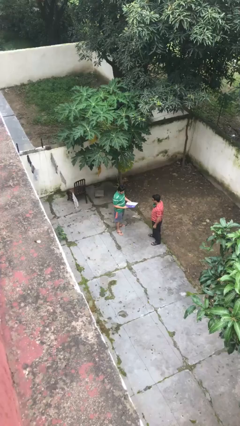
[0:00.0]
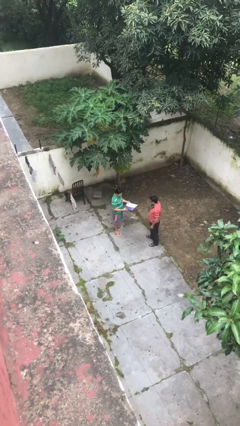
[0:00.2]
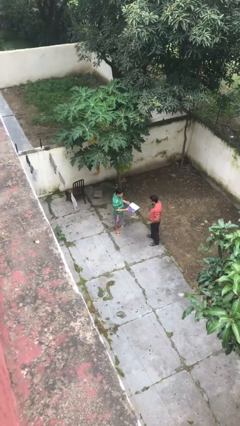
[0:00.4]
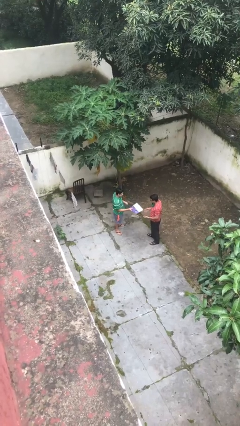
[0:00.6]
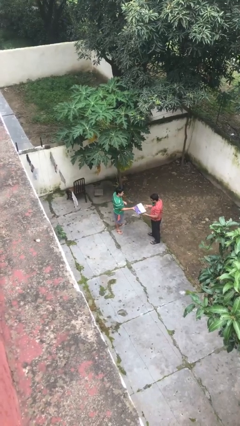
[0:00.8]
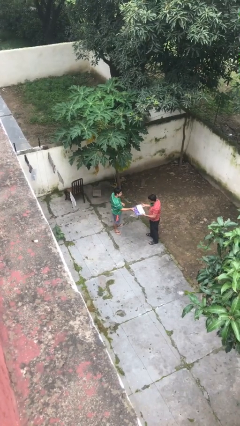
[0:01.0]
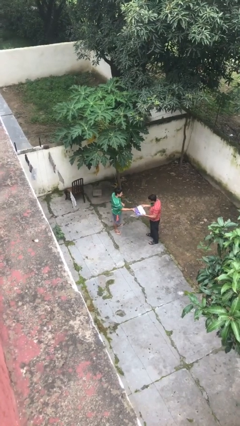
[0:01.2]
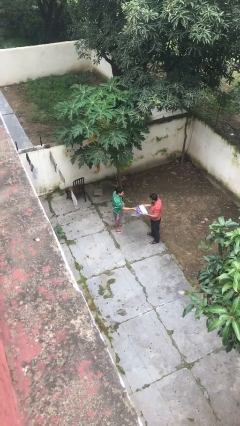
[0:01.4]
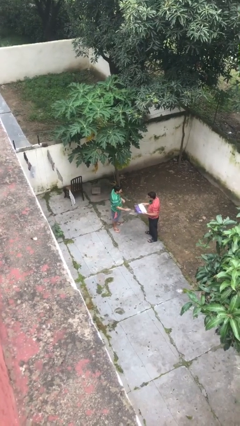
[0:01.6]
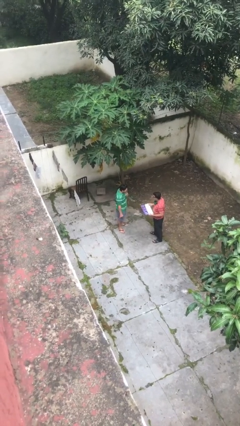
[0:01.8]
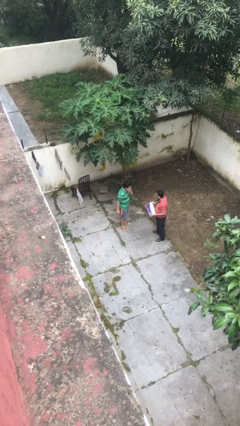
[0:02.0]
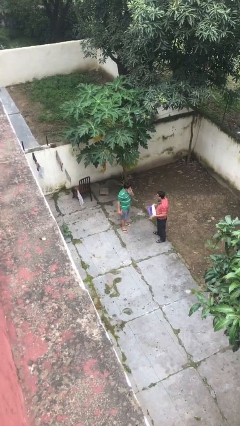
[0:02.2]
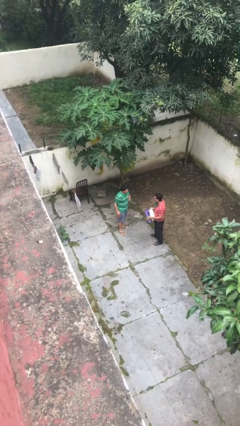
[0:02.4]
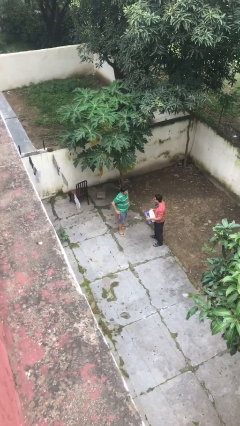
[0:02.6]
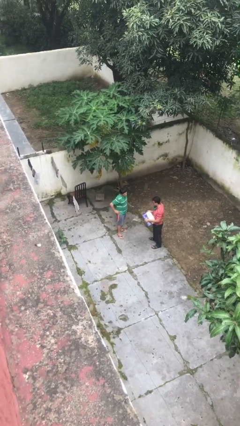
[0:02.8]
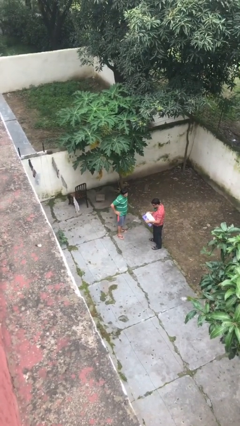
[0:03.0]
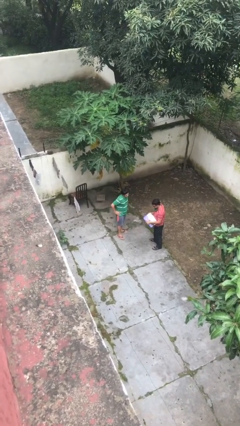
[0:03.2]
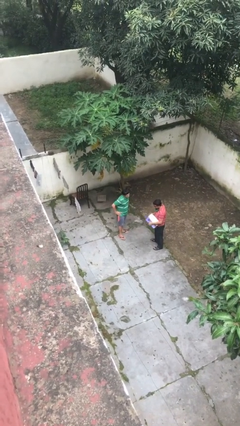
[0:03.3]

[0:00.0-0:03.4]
person transfers object to person

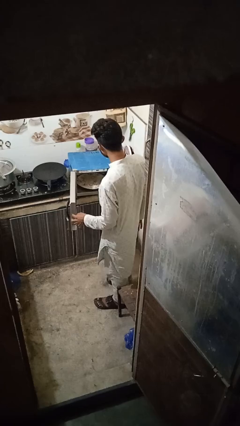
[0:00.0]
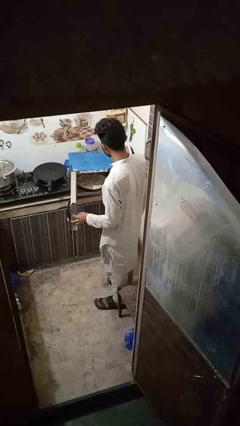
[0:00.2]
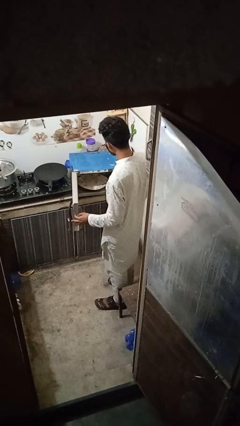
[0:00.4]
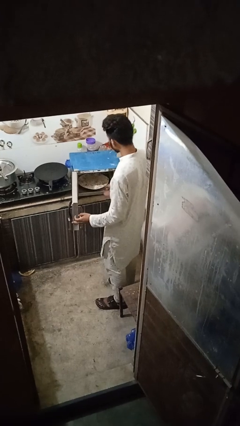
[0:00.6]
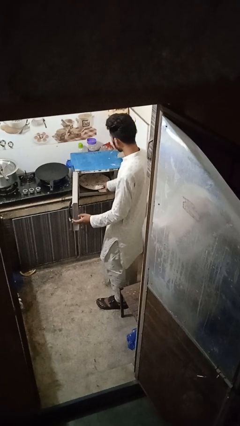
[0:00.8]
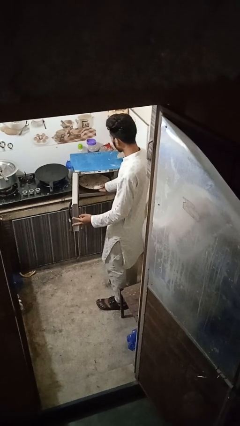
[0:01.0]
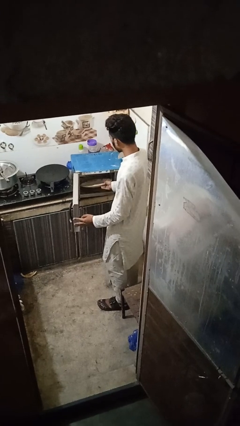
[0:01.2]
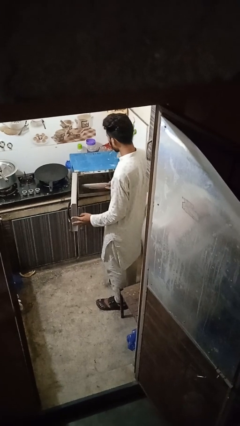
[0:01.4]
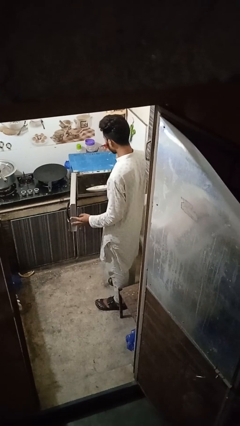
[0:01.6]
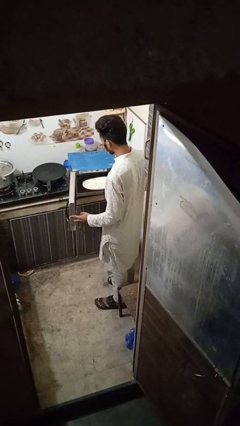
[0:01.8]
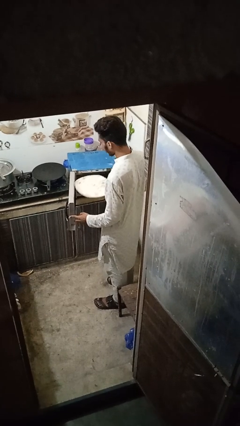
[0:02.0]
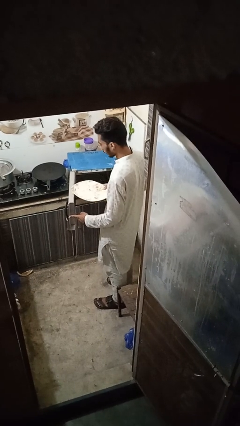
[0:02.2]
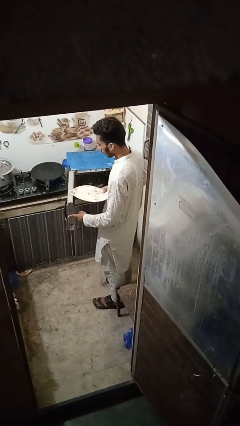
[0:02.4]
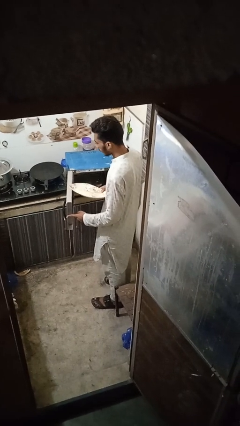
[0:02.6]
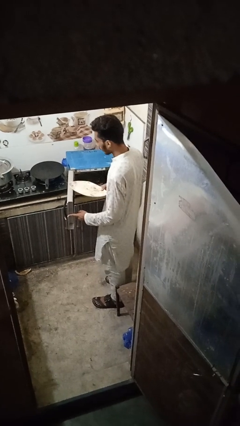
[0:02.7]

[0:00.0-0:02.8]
person takes object from oven

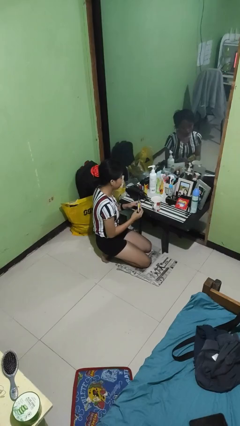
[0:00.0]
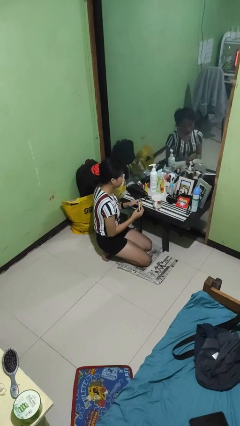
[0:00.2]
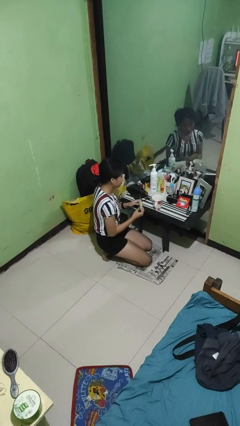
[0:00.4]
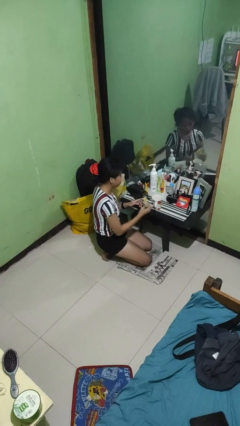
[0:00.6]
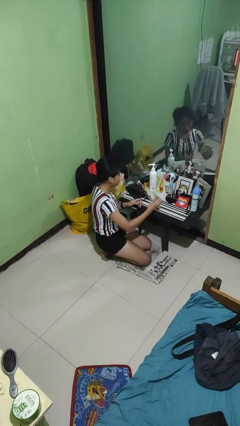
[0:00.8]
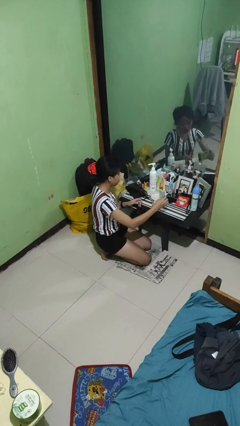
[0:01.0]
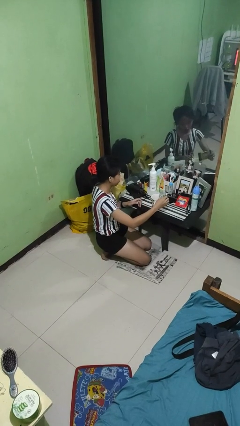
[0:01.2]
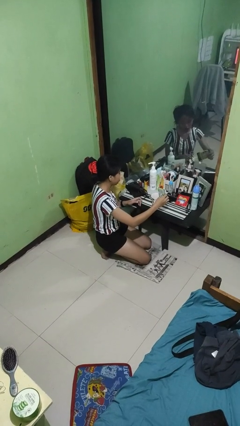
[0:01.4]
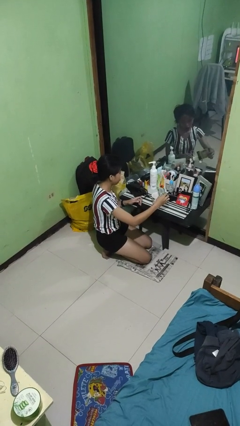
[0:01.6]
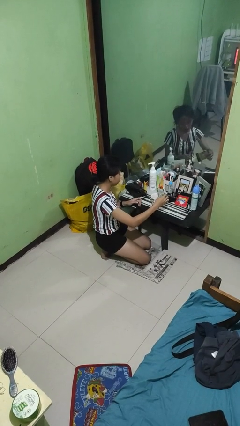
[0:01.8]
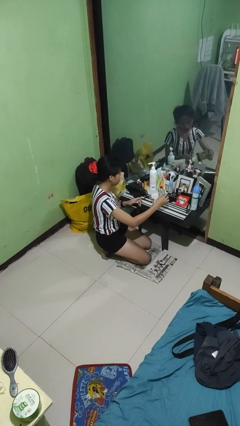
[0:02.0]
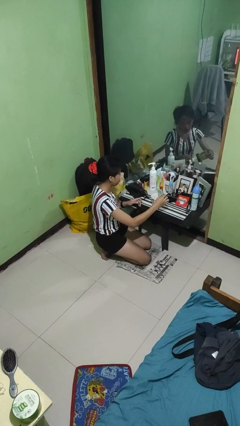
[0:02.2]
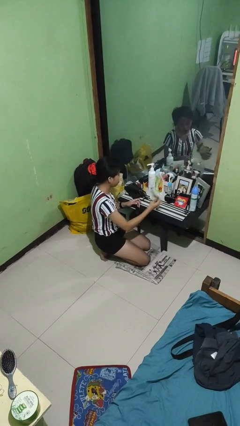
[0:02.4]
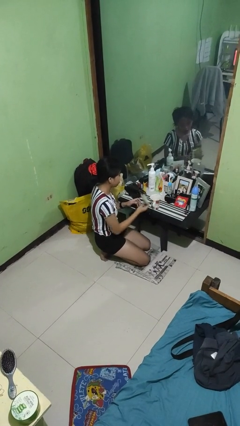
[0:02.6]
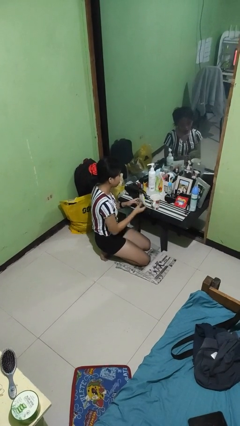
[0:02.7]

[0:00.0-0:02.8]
person pours coffee into mug

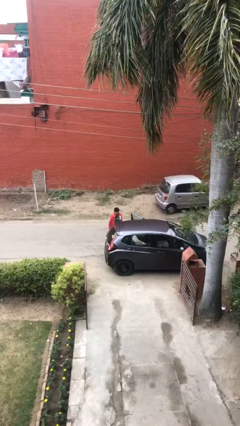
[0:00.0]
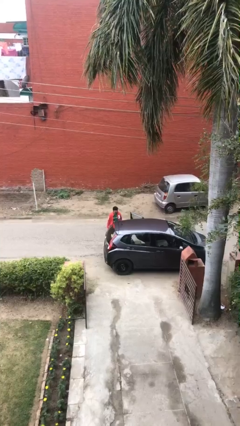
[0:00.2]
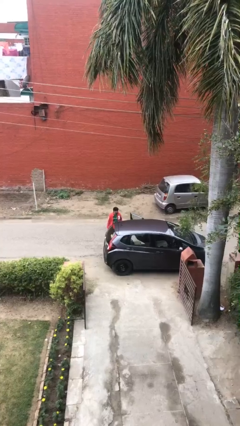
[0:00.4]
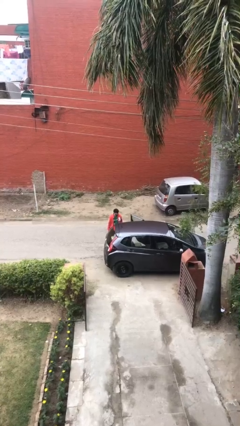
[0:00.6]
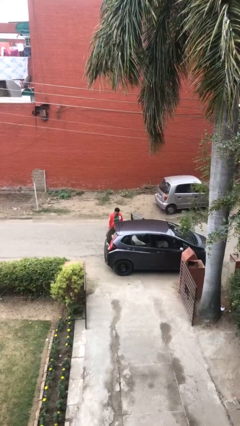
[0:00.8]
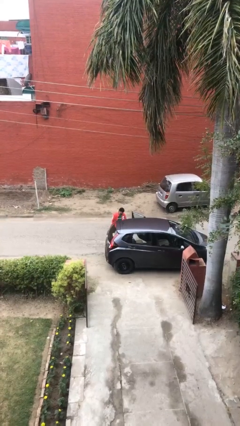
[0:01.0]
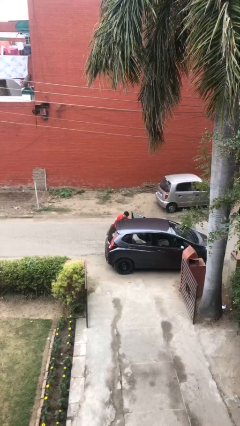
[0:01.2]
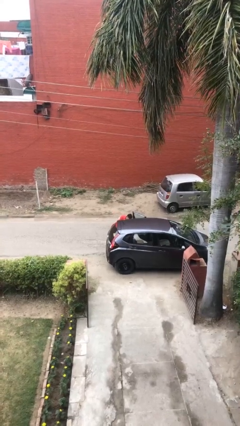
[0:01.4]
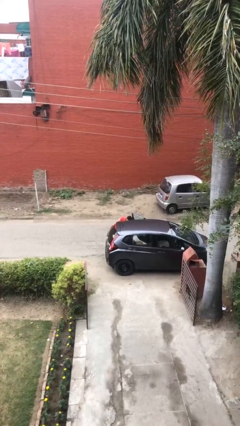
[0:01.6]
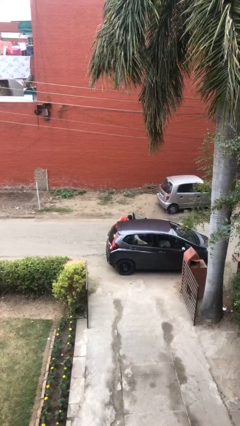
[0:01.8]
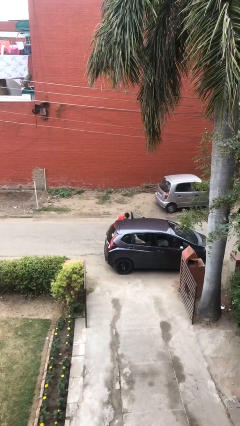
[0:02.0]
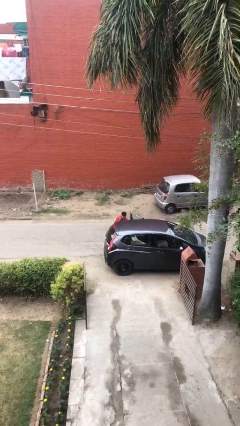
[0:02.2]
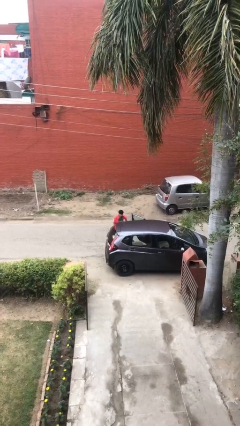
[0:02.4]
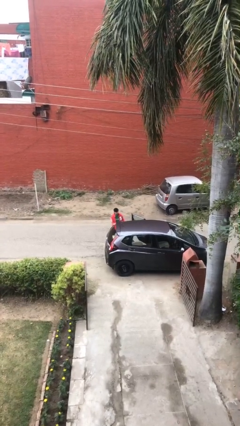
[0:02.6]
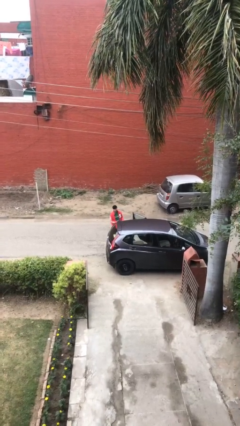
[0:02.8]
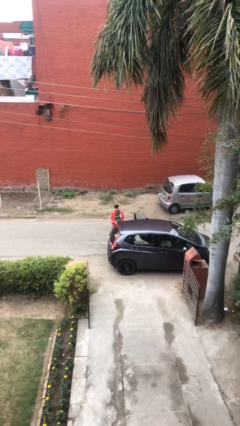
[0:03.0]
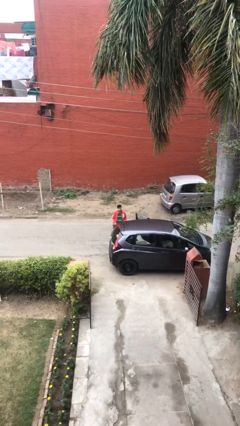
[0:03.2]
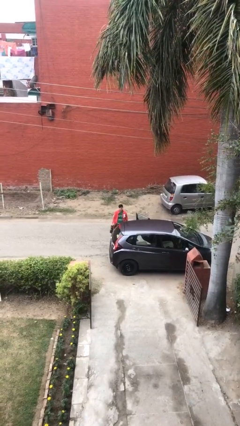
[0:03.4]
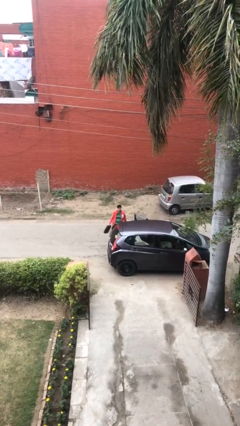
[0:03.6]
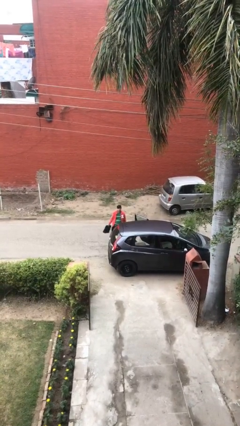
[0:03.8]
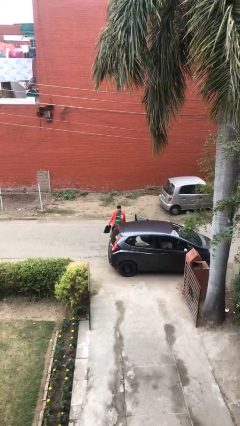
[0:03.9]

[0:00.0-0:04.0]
person unloads car

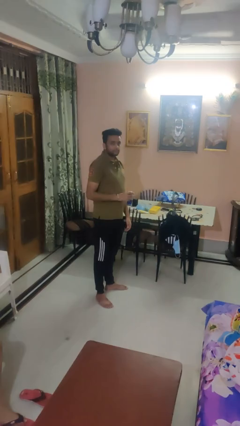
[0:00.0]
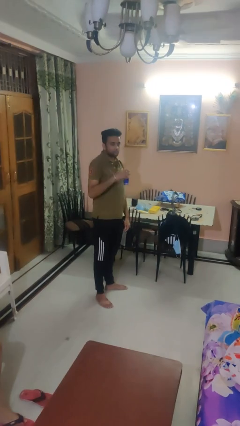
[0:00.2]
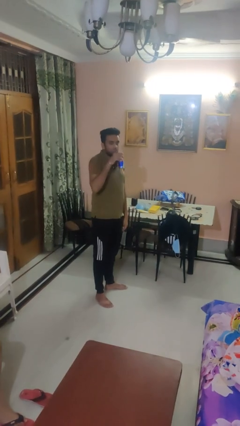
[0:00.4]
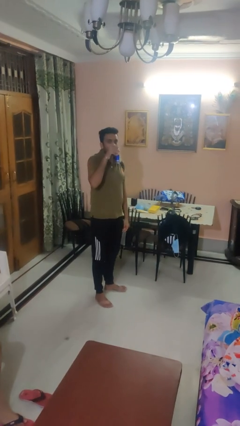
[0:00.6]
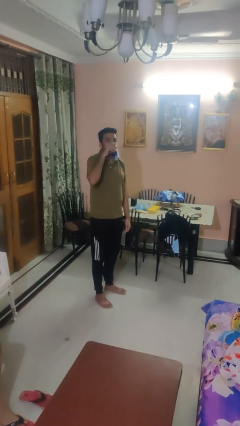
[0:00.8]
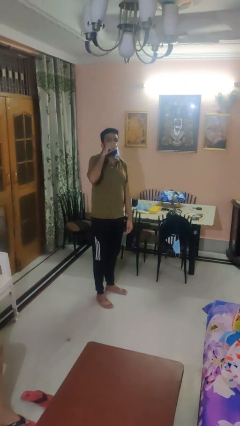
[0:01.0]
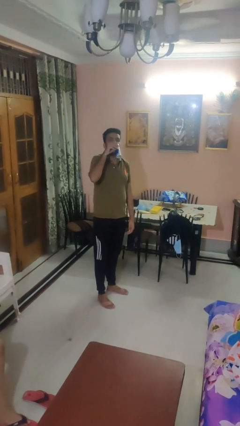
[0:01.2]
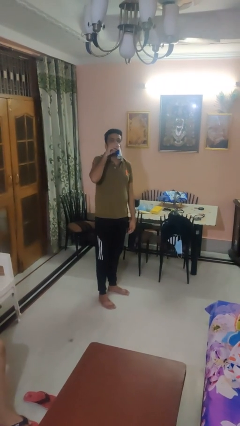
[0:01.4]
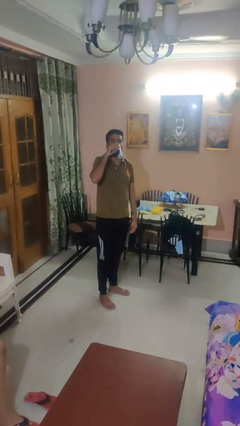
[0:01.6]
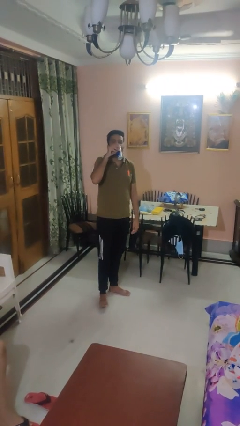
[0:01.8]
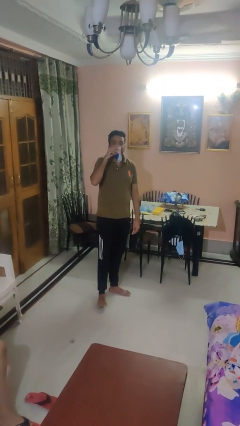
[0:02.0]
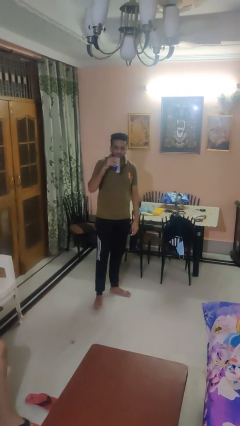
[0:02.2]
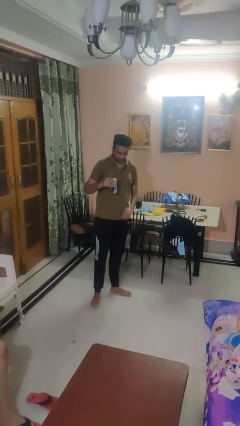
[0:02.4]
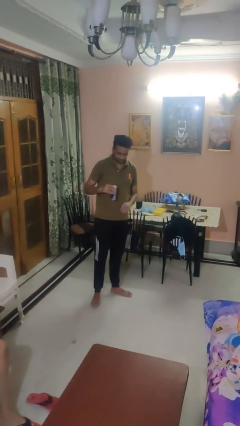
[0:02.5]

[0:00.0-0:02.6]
person drinks from beverage can

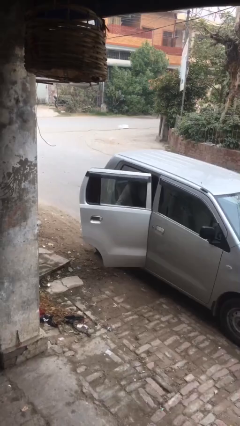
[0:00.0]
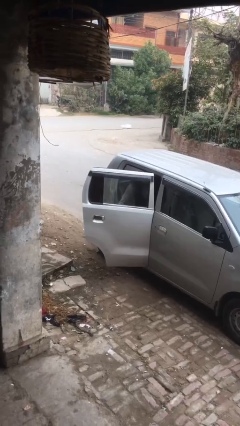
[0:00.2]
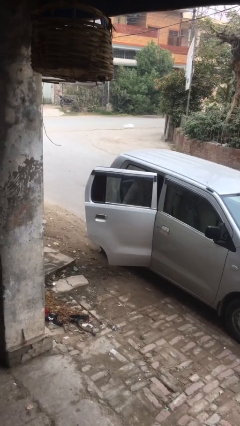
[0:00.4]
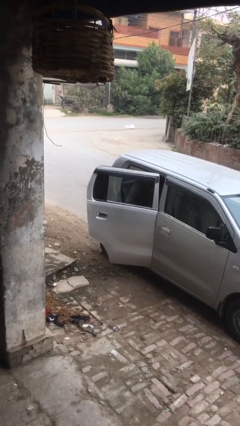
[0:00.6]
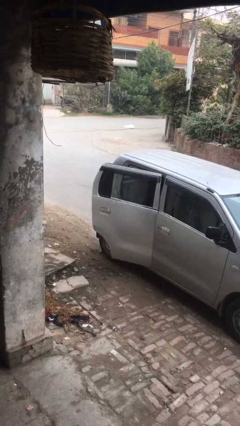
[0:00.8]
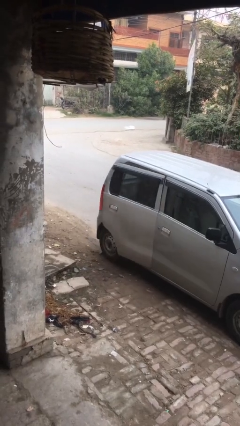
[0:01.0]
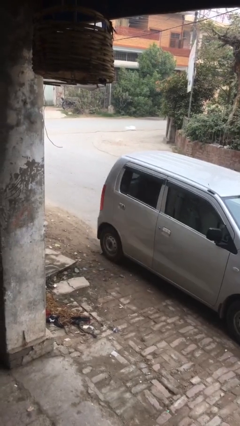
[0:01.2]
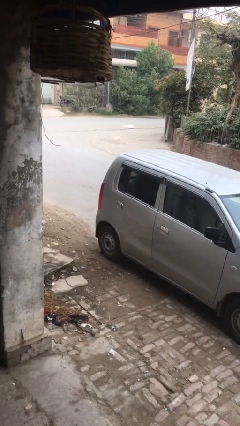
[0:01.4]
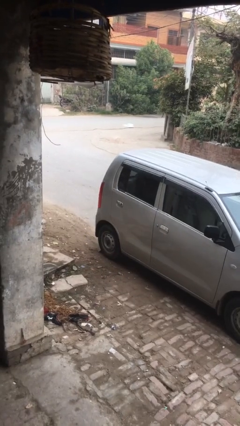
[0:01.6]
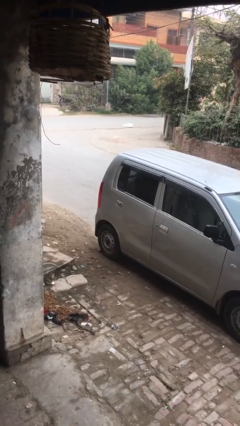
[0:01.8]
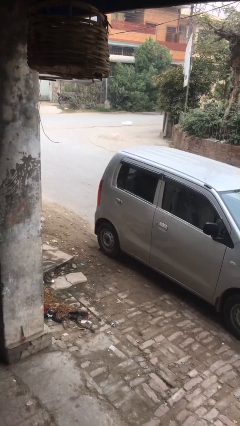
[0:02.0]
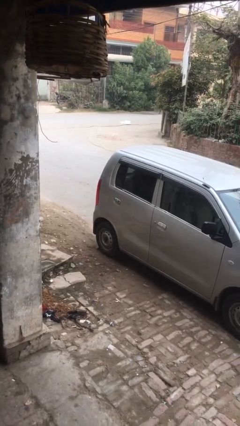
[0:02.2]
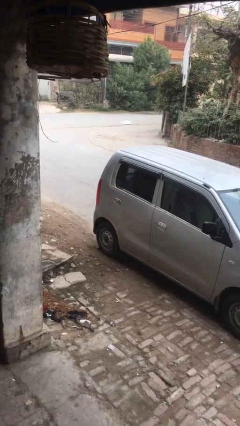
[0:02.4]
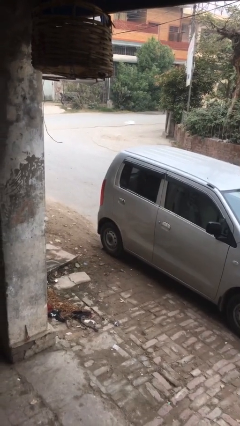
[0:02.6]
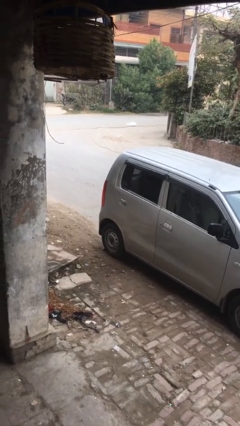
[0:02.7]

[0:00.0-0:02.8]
person closes car door
